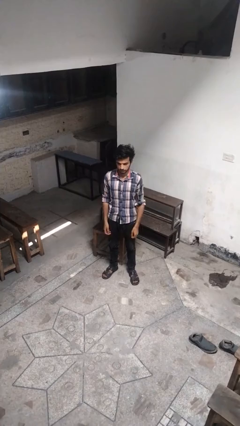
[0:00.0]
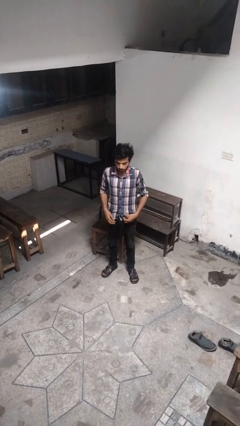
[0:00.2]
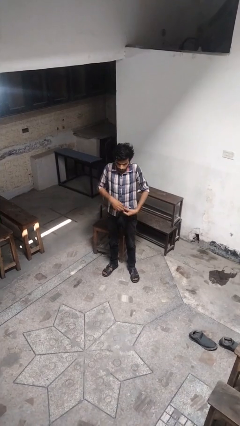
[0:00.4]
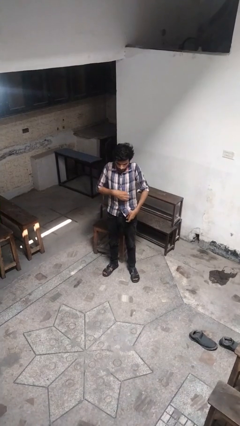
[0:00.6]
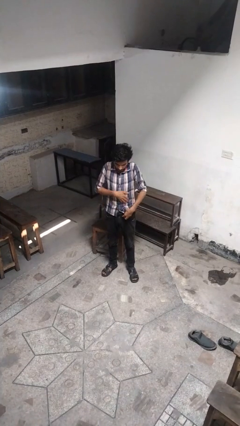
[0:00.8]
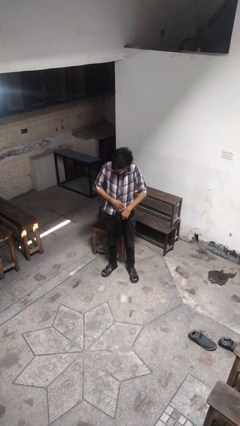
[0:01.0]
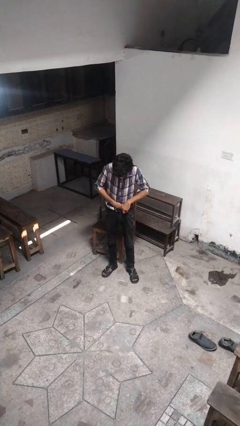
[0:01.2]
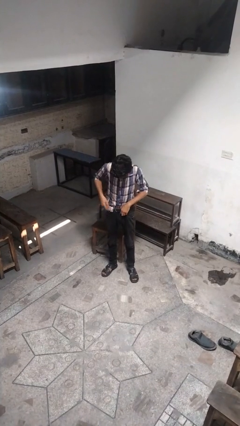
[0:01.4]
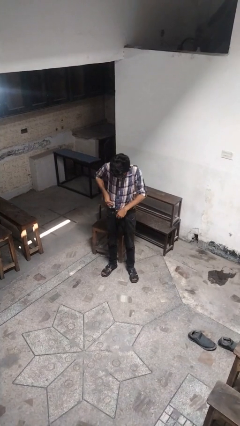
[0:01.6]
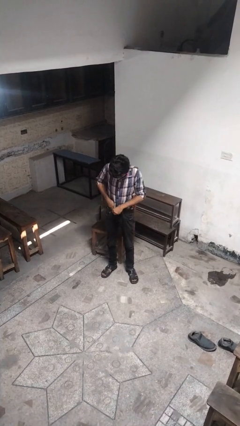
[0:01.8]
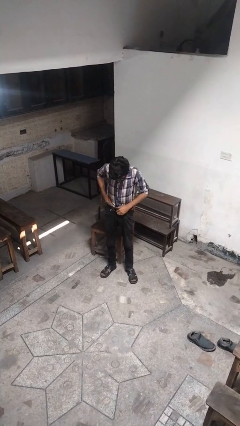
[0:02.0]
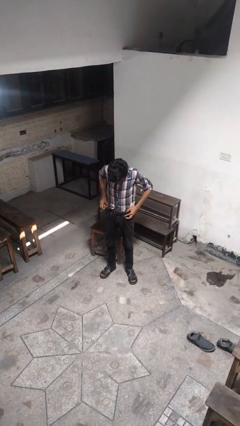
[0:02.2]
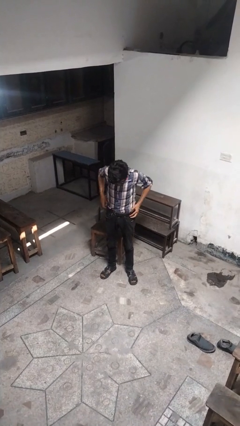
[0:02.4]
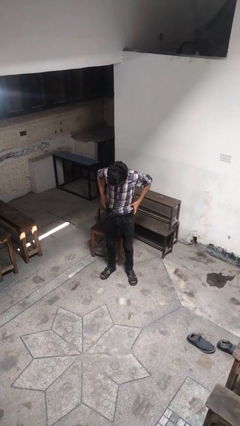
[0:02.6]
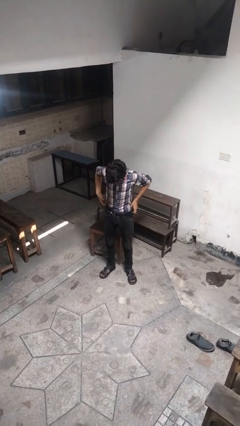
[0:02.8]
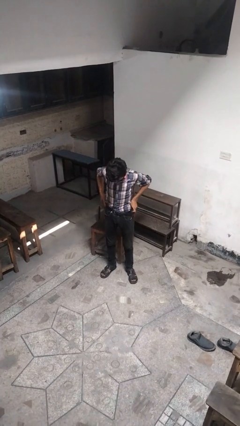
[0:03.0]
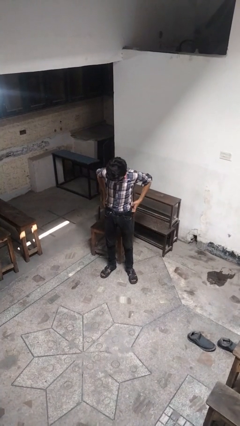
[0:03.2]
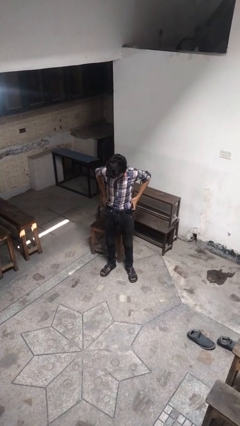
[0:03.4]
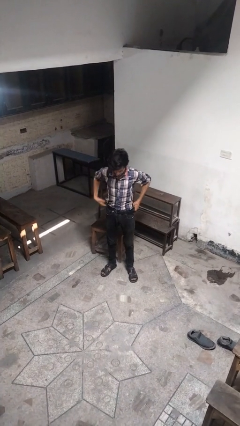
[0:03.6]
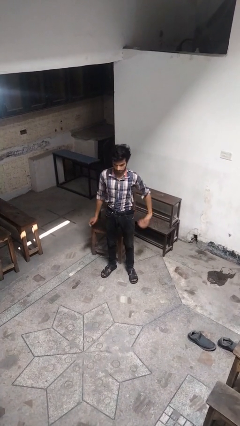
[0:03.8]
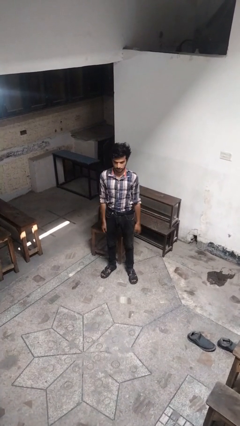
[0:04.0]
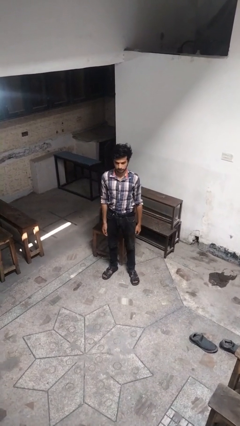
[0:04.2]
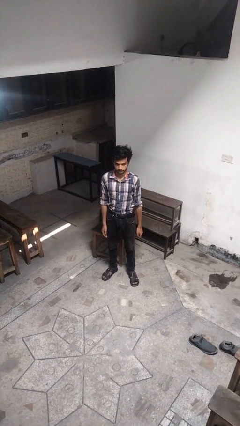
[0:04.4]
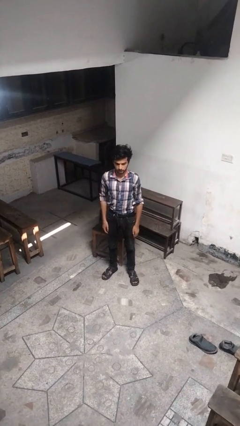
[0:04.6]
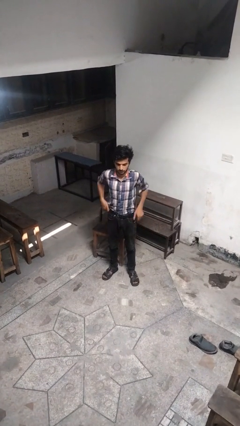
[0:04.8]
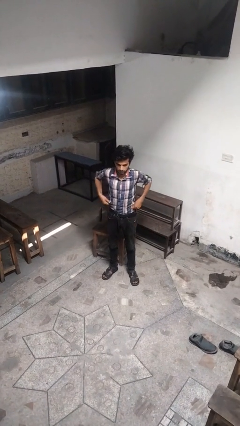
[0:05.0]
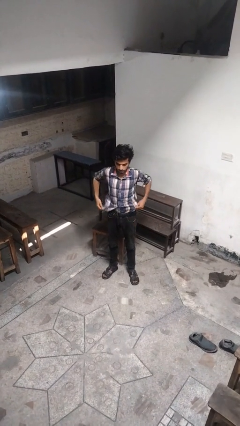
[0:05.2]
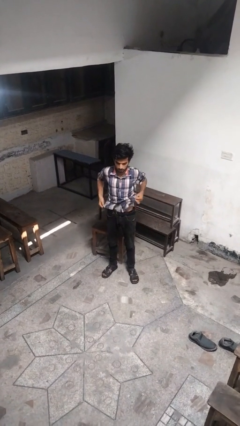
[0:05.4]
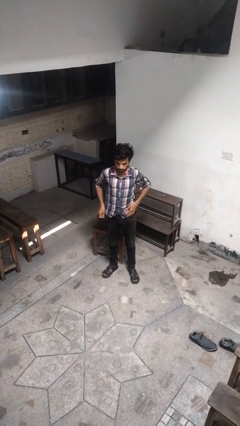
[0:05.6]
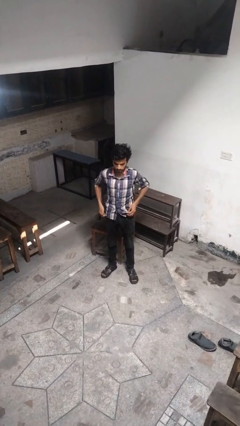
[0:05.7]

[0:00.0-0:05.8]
person tucks in shirt

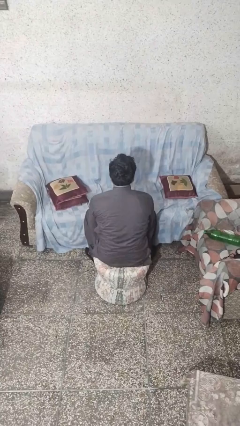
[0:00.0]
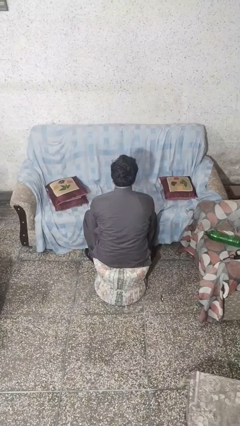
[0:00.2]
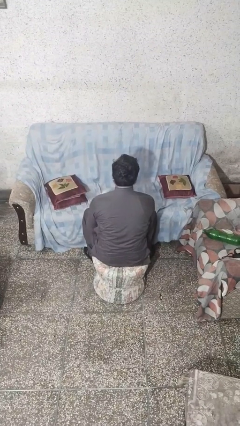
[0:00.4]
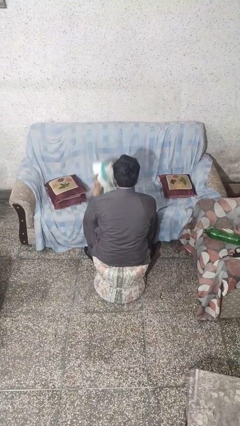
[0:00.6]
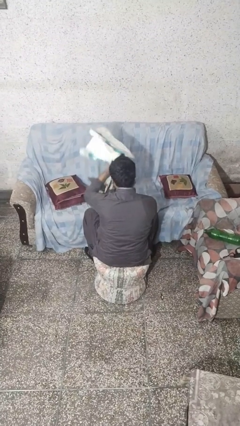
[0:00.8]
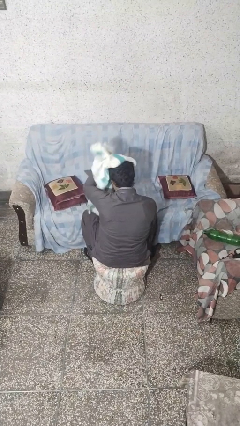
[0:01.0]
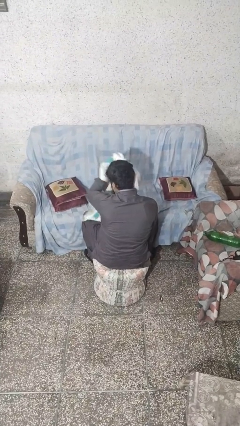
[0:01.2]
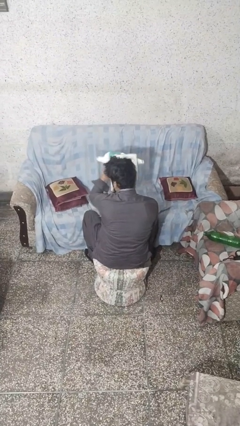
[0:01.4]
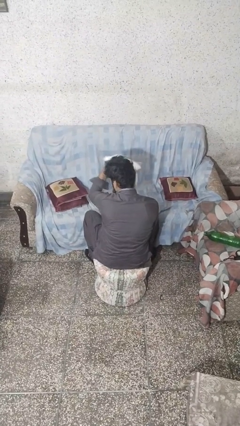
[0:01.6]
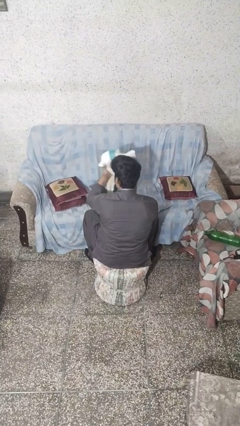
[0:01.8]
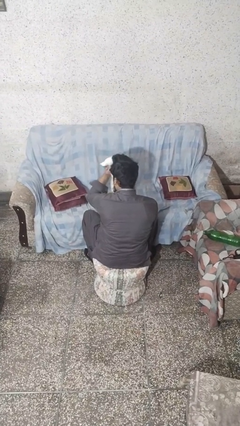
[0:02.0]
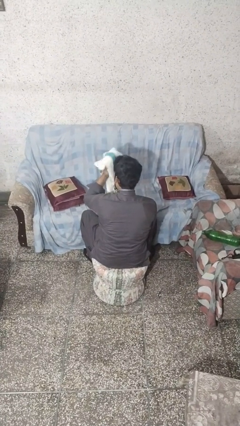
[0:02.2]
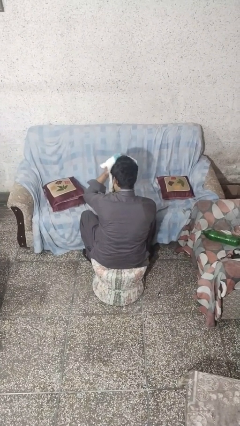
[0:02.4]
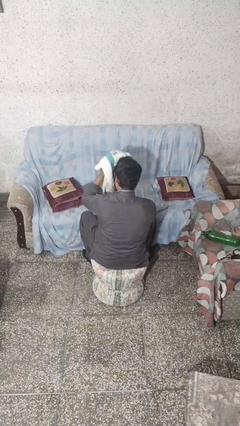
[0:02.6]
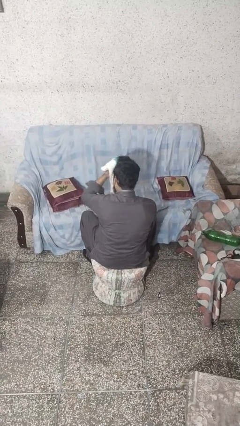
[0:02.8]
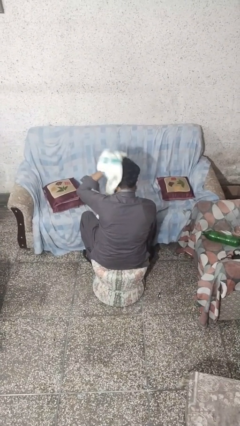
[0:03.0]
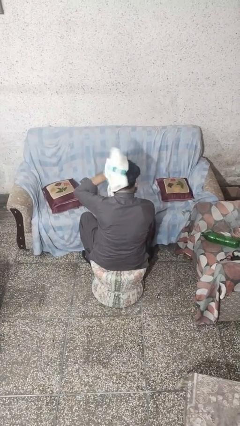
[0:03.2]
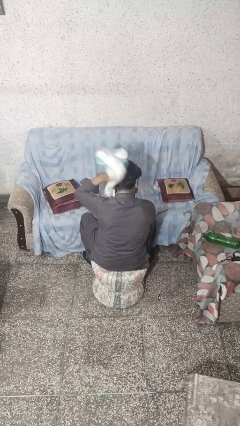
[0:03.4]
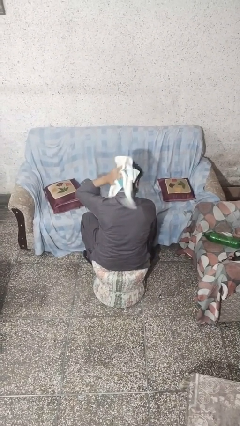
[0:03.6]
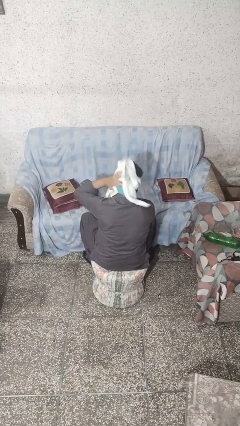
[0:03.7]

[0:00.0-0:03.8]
person dries hair with towel

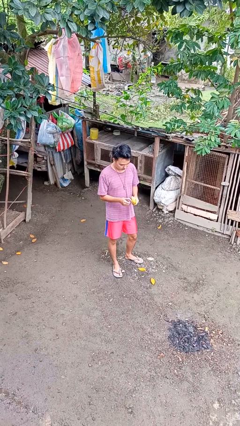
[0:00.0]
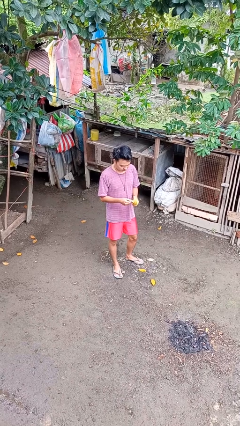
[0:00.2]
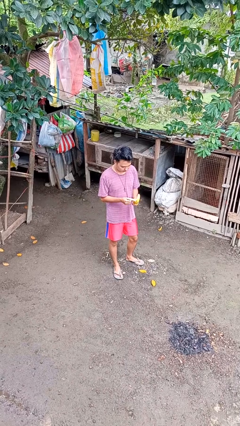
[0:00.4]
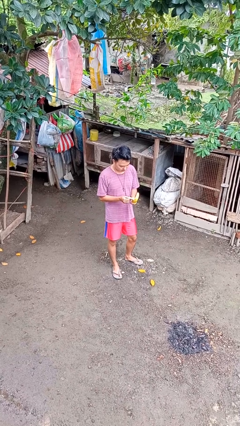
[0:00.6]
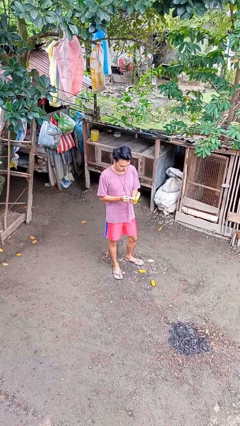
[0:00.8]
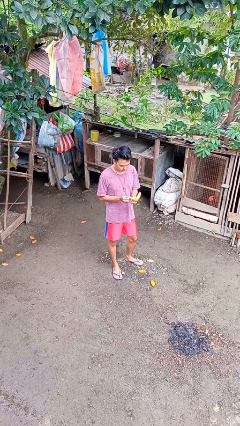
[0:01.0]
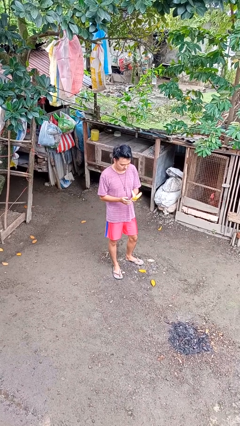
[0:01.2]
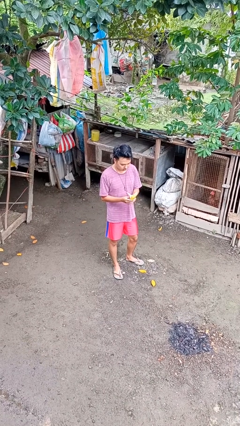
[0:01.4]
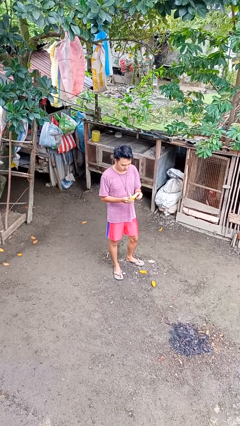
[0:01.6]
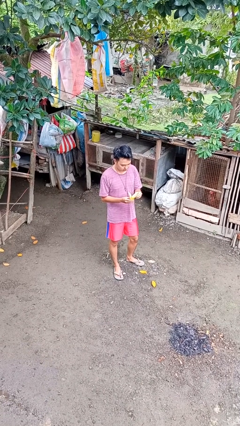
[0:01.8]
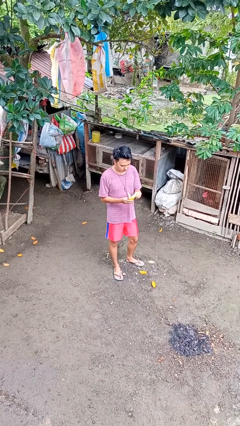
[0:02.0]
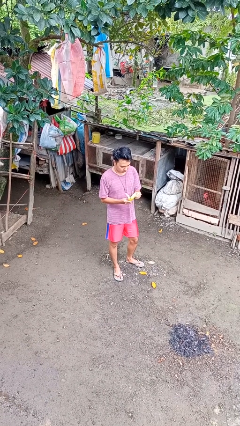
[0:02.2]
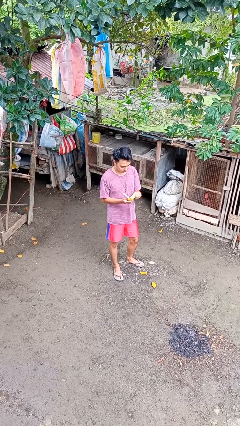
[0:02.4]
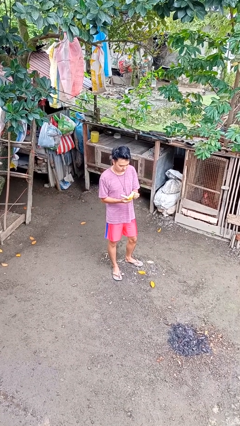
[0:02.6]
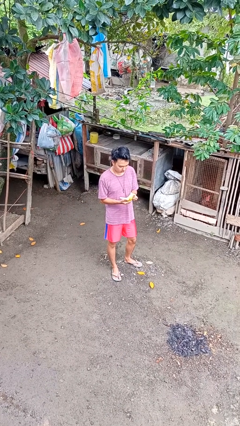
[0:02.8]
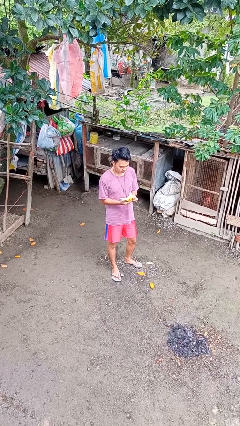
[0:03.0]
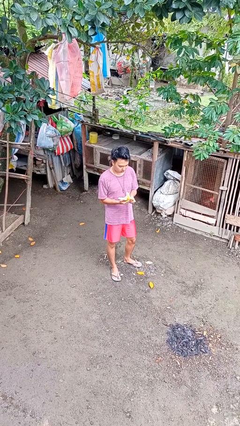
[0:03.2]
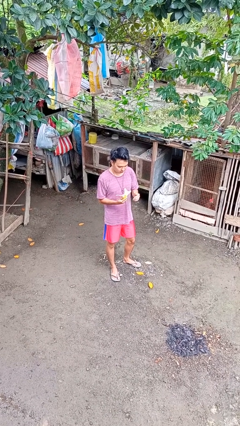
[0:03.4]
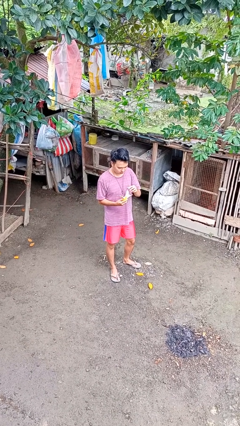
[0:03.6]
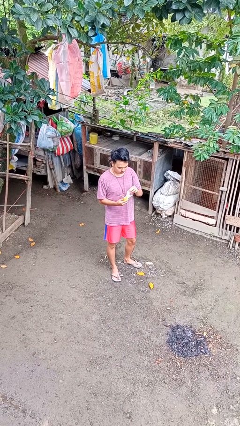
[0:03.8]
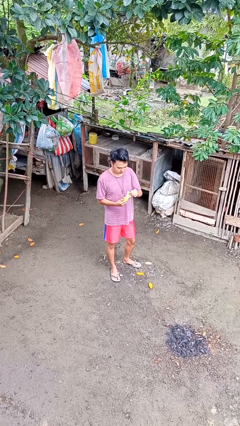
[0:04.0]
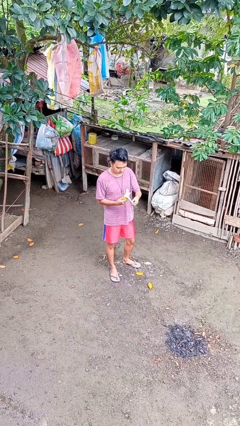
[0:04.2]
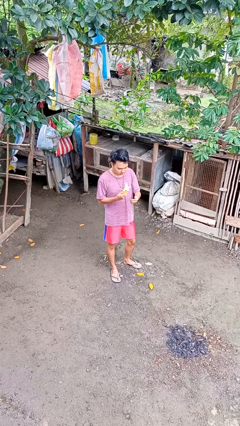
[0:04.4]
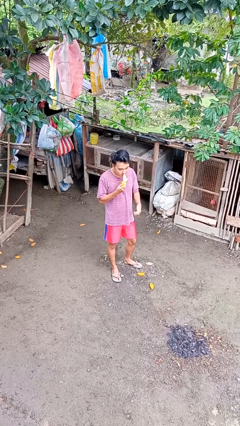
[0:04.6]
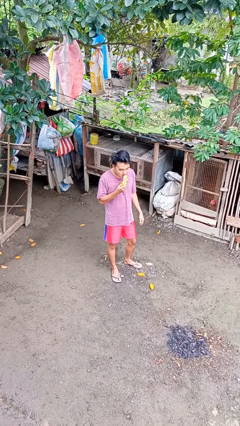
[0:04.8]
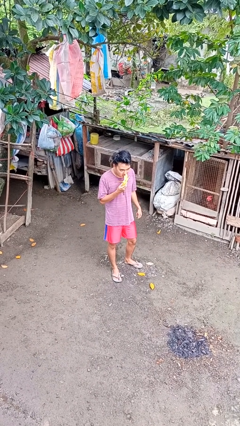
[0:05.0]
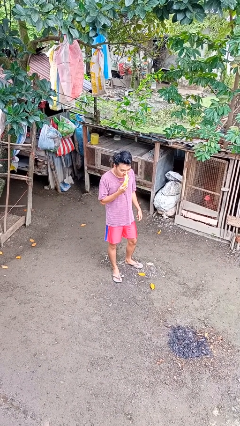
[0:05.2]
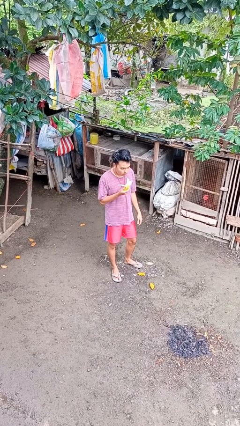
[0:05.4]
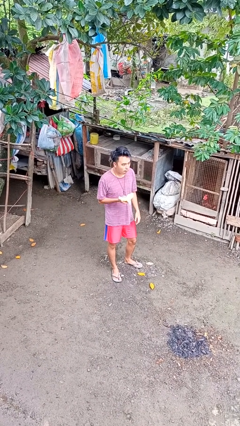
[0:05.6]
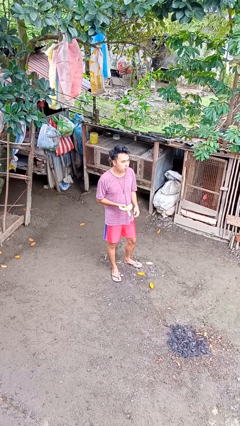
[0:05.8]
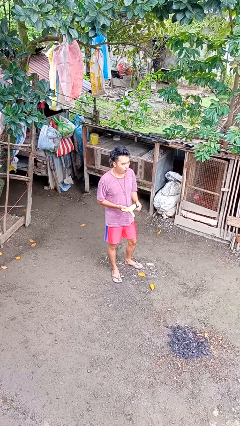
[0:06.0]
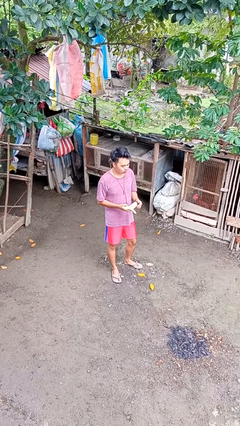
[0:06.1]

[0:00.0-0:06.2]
person eats banana

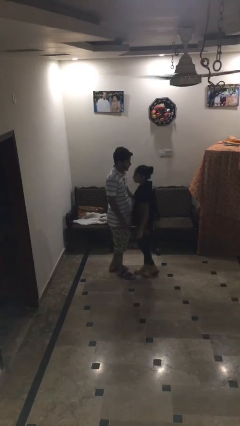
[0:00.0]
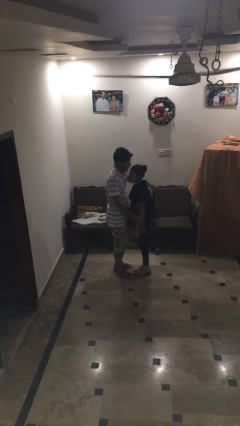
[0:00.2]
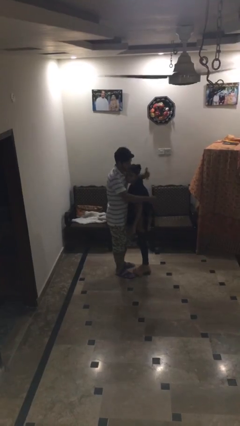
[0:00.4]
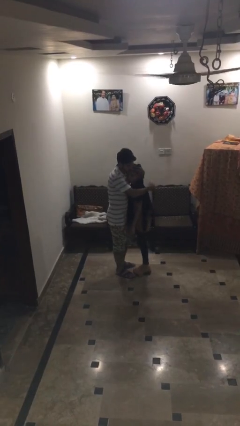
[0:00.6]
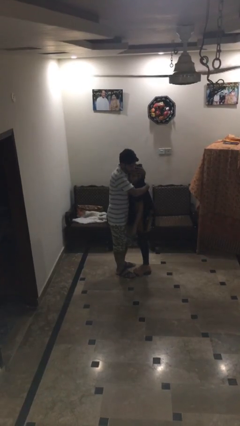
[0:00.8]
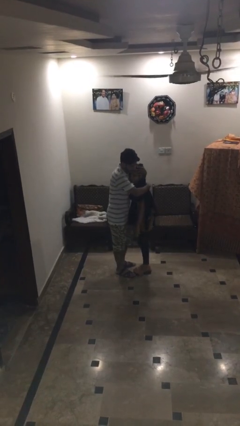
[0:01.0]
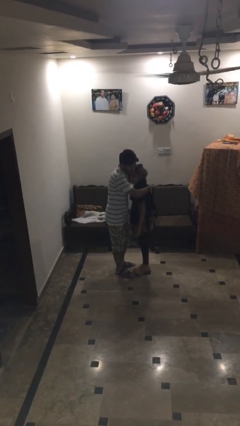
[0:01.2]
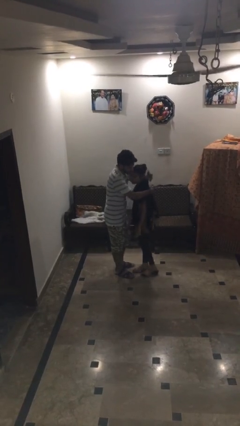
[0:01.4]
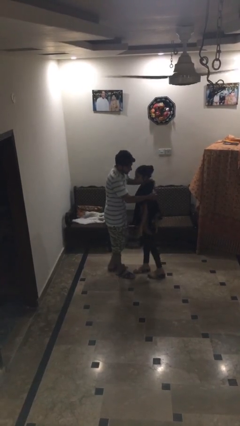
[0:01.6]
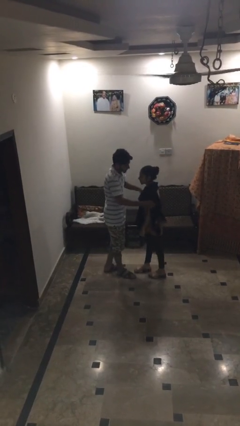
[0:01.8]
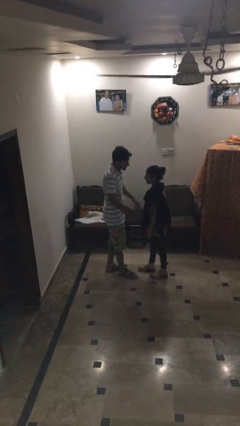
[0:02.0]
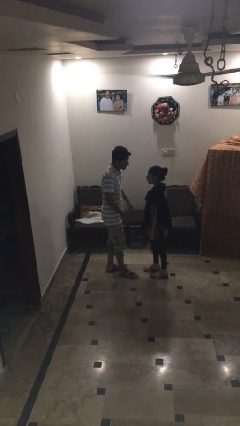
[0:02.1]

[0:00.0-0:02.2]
person embraces person
